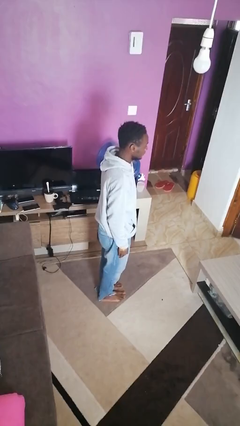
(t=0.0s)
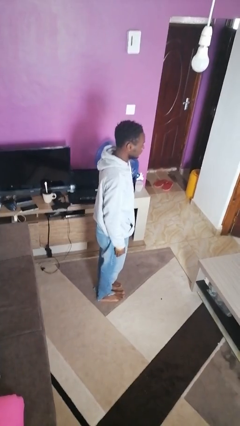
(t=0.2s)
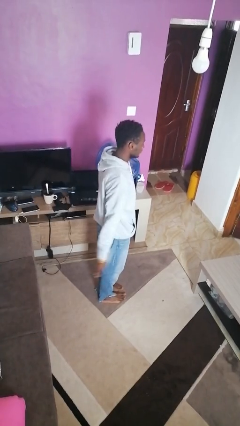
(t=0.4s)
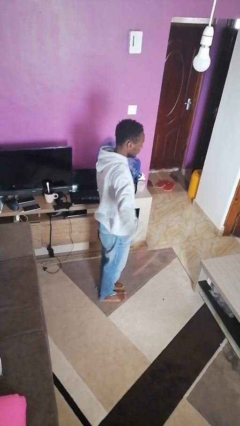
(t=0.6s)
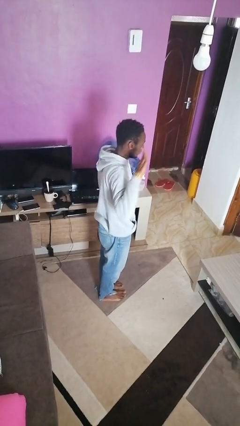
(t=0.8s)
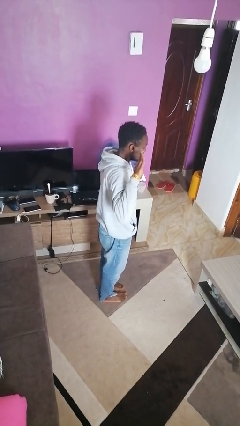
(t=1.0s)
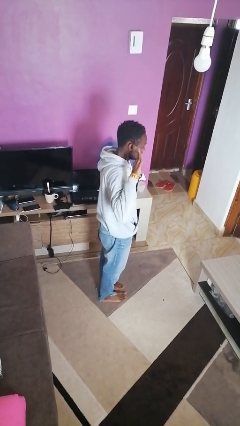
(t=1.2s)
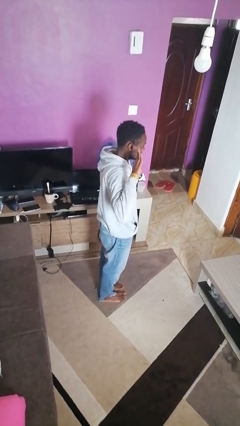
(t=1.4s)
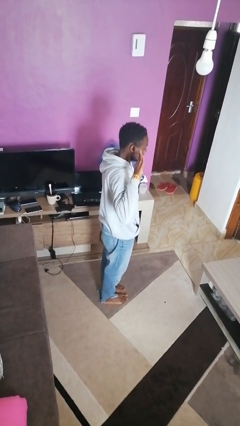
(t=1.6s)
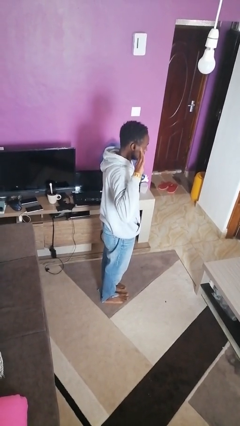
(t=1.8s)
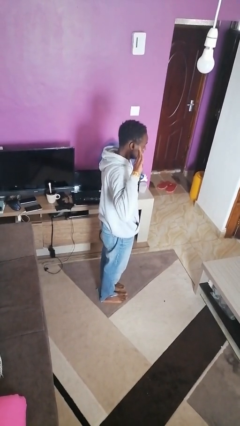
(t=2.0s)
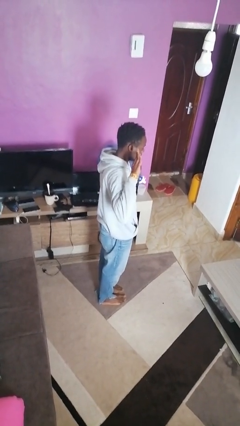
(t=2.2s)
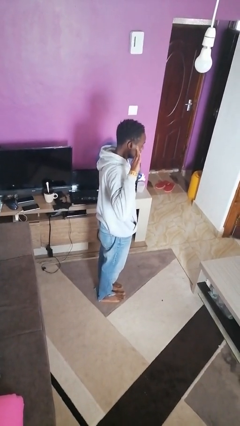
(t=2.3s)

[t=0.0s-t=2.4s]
person salutes

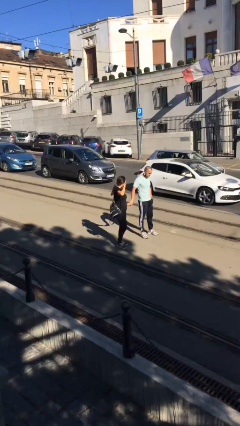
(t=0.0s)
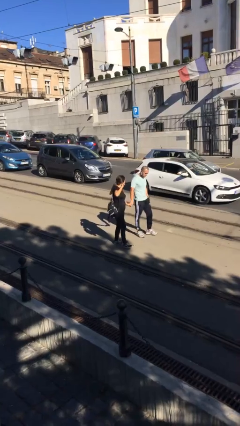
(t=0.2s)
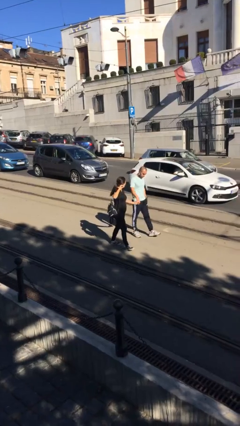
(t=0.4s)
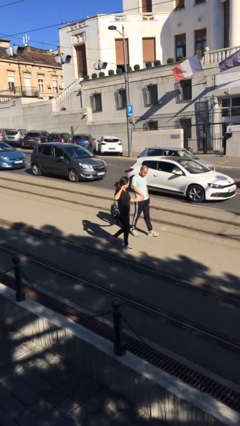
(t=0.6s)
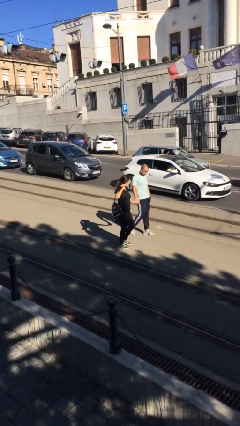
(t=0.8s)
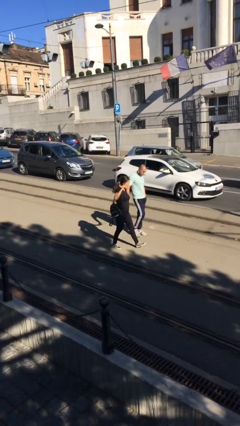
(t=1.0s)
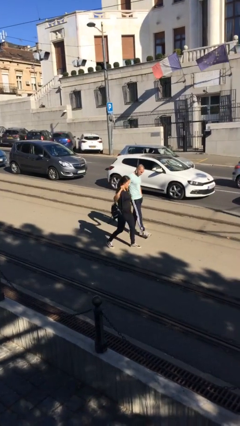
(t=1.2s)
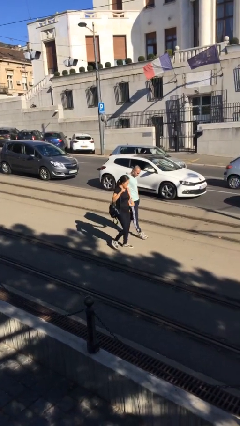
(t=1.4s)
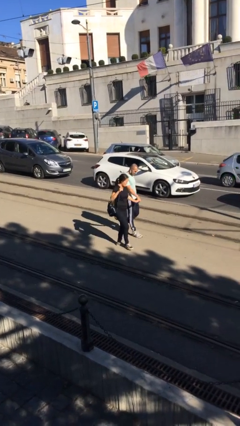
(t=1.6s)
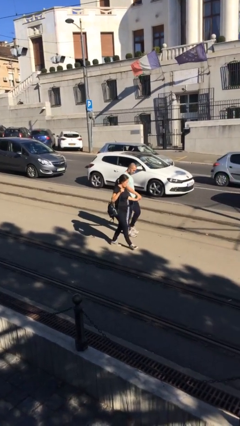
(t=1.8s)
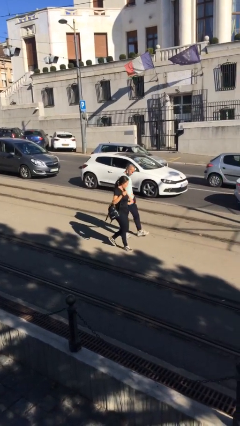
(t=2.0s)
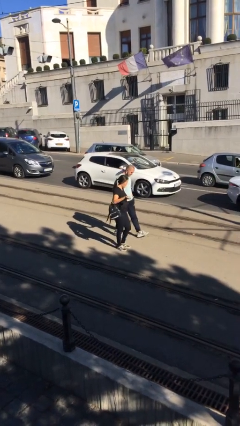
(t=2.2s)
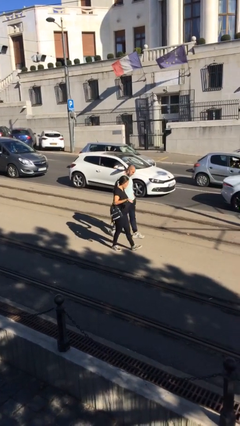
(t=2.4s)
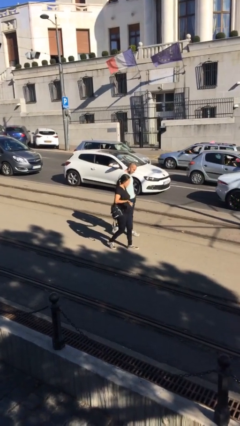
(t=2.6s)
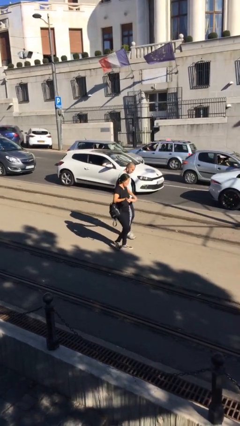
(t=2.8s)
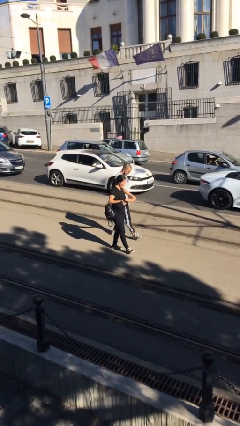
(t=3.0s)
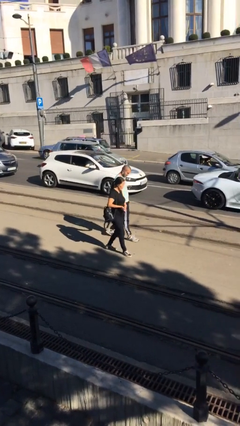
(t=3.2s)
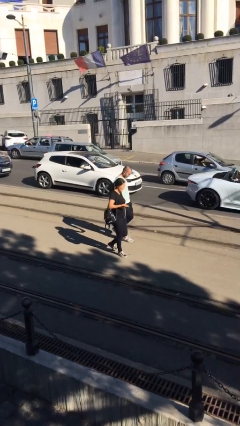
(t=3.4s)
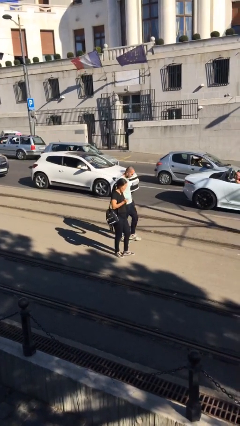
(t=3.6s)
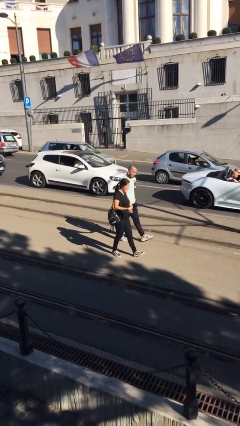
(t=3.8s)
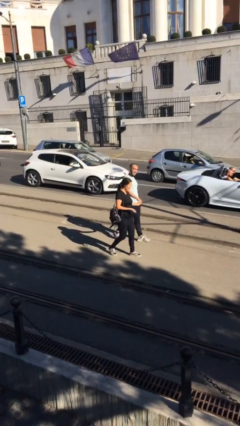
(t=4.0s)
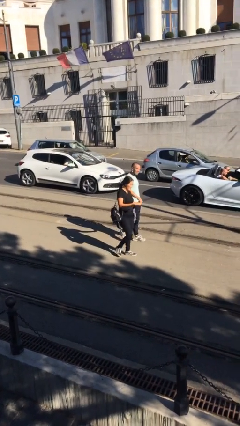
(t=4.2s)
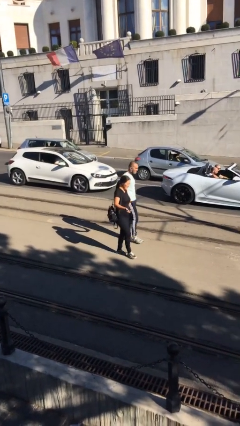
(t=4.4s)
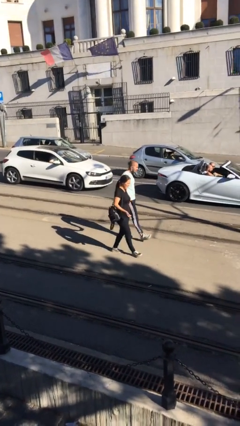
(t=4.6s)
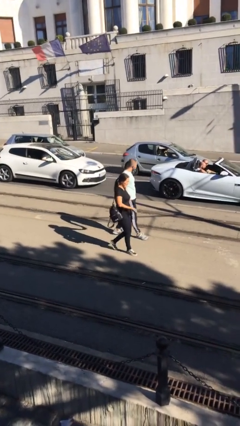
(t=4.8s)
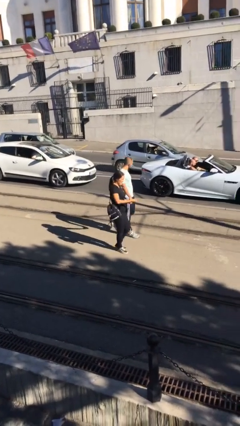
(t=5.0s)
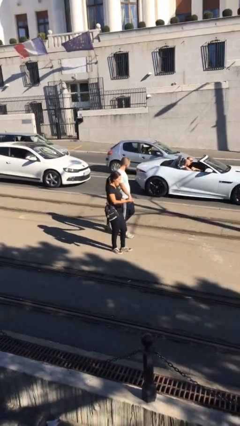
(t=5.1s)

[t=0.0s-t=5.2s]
person holds hand

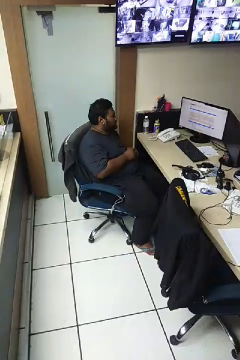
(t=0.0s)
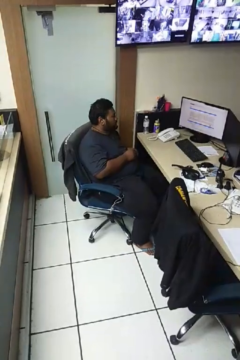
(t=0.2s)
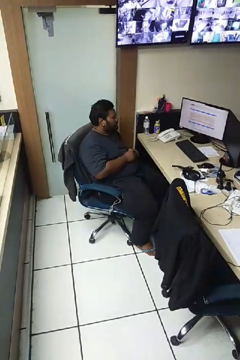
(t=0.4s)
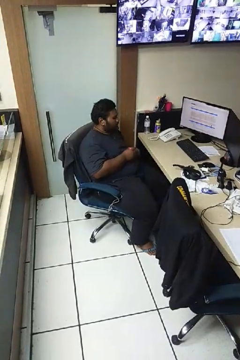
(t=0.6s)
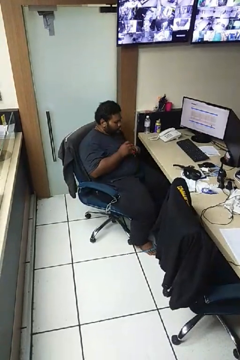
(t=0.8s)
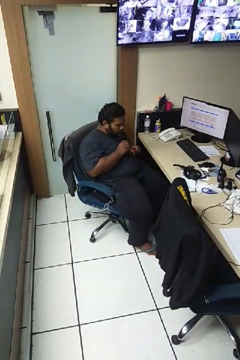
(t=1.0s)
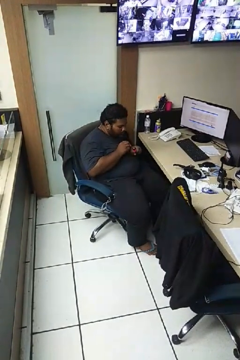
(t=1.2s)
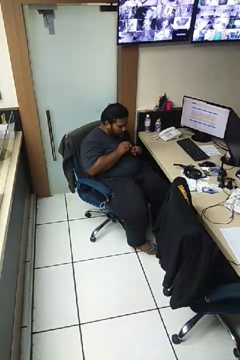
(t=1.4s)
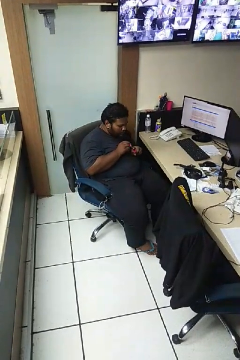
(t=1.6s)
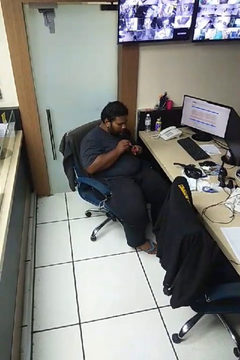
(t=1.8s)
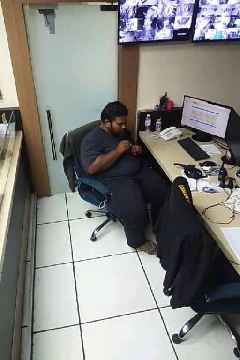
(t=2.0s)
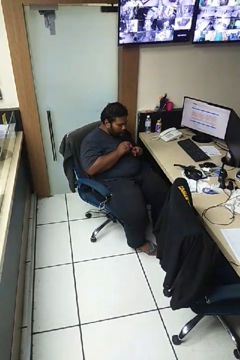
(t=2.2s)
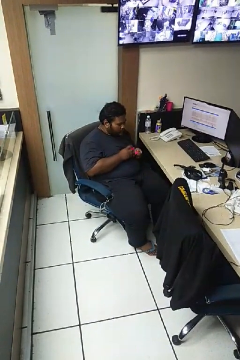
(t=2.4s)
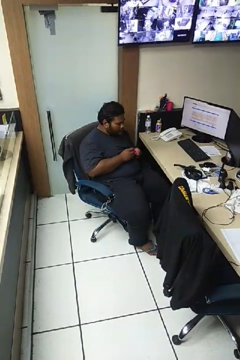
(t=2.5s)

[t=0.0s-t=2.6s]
person paints fingernails

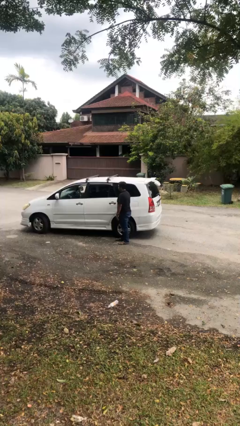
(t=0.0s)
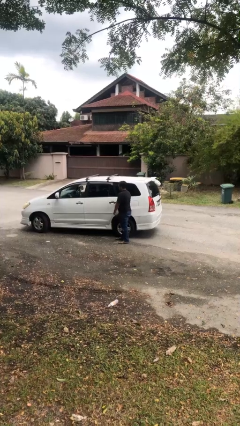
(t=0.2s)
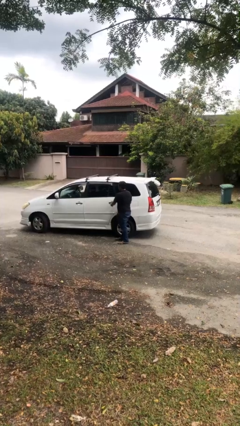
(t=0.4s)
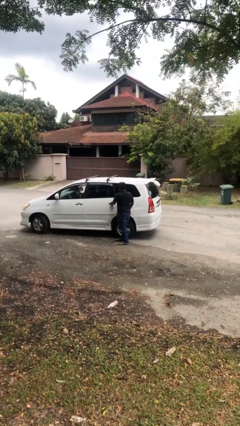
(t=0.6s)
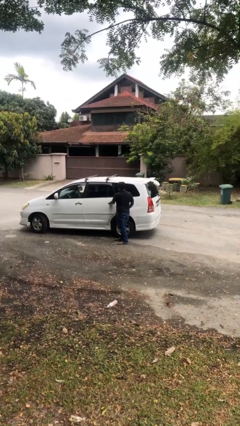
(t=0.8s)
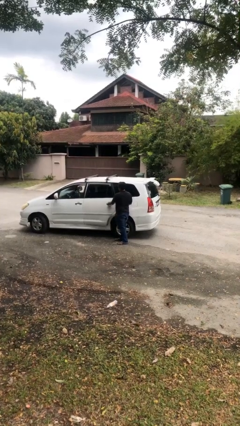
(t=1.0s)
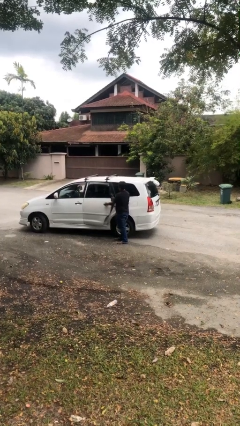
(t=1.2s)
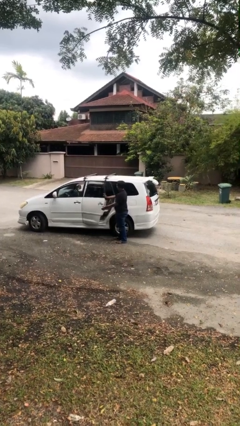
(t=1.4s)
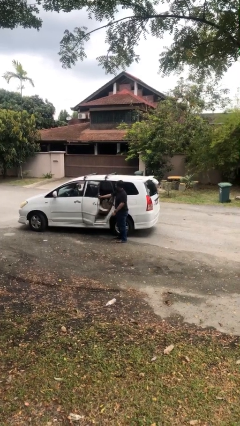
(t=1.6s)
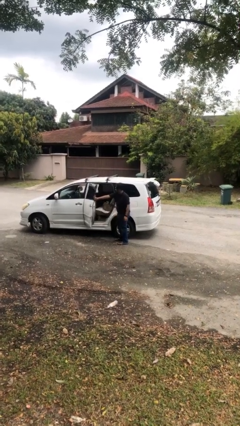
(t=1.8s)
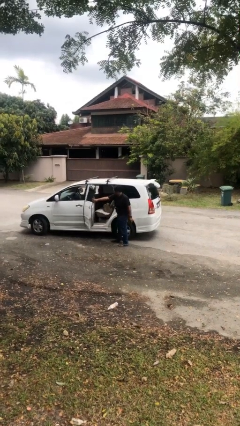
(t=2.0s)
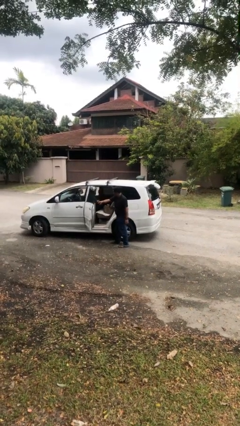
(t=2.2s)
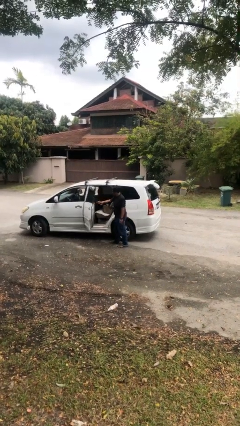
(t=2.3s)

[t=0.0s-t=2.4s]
person opens car door

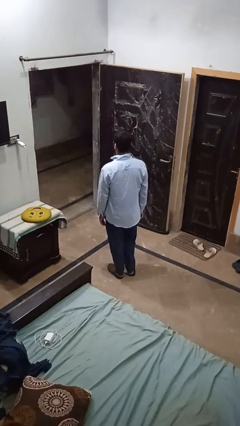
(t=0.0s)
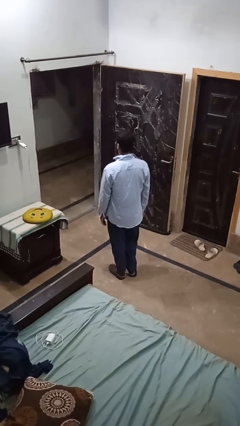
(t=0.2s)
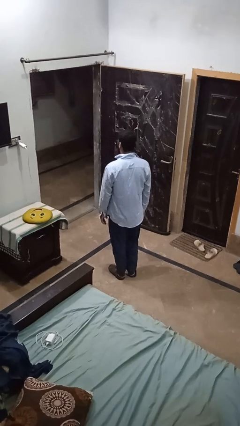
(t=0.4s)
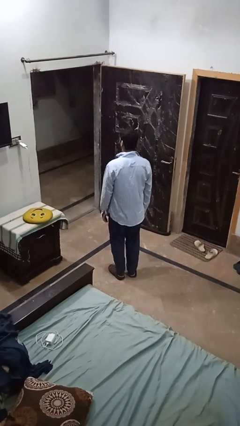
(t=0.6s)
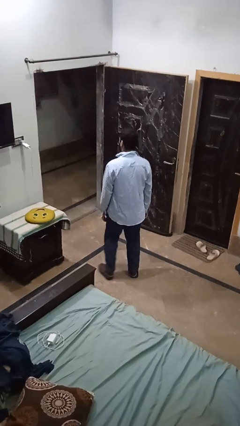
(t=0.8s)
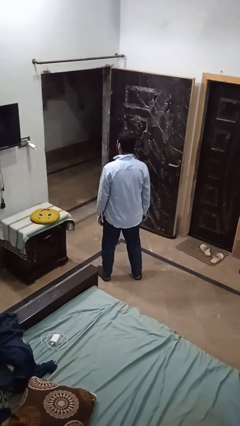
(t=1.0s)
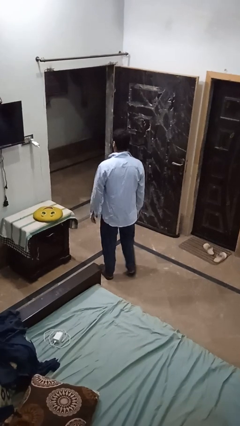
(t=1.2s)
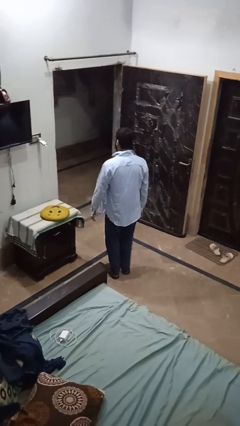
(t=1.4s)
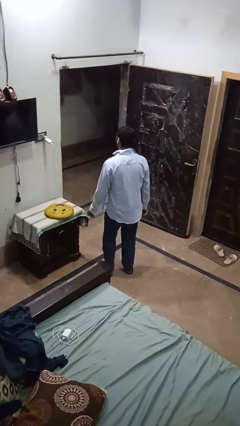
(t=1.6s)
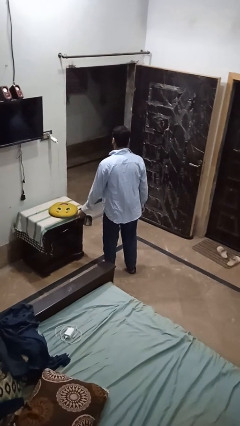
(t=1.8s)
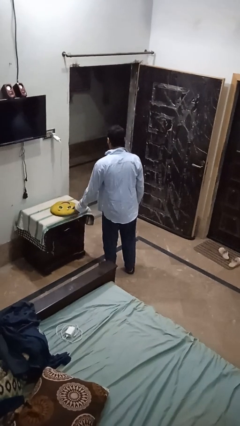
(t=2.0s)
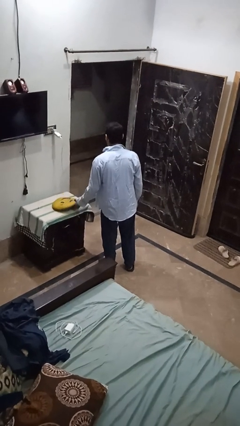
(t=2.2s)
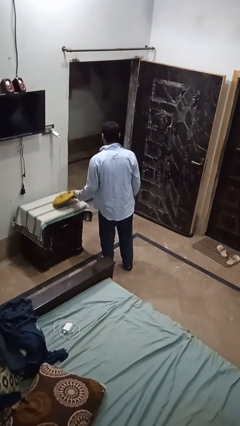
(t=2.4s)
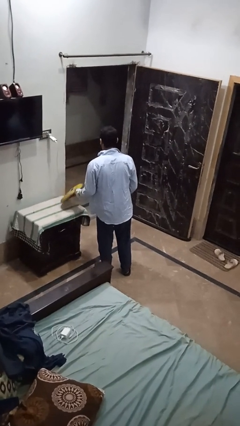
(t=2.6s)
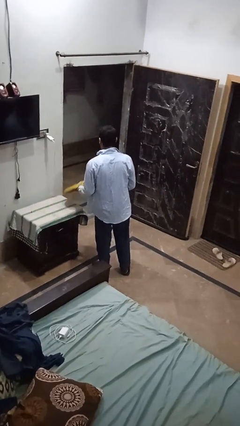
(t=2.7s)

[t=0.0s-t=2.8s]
person picks up object from table

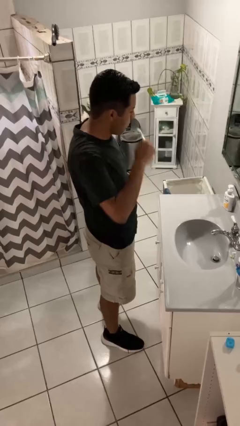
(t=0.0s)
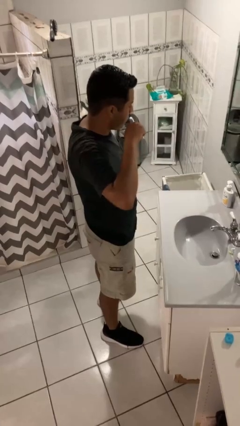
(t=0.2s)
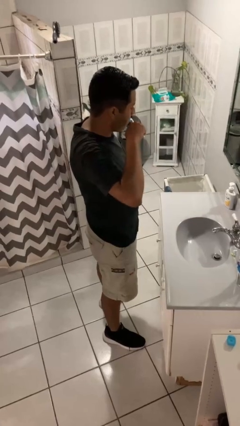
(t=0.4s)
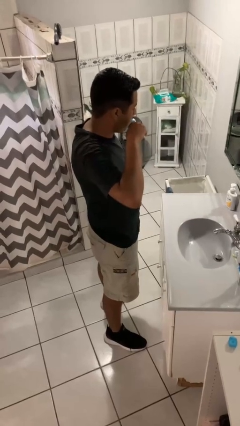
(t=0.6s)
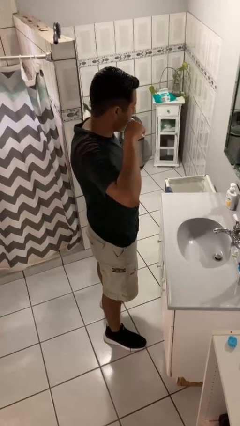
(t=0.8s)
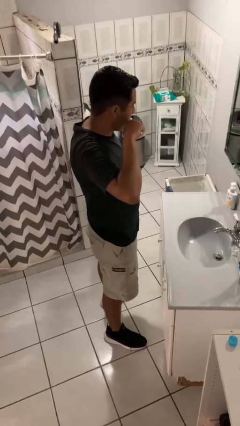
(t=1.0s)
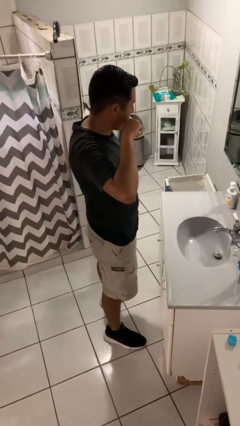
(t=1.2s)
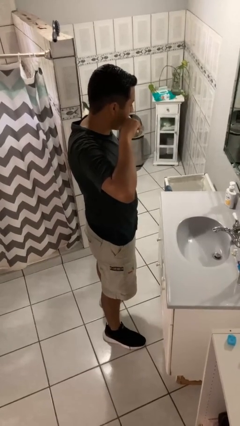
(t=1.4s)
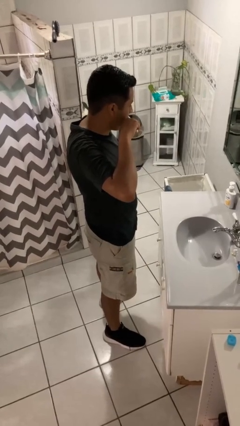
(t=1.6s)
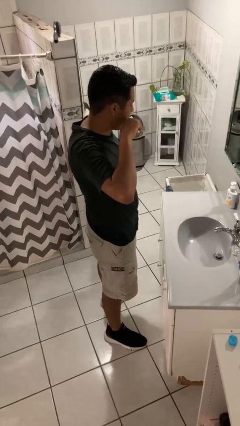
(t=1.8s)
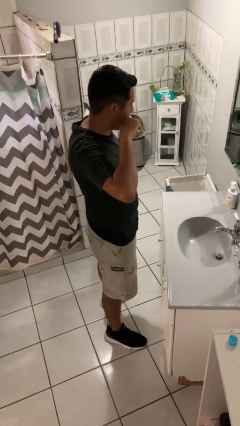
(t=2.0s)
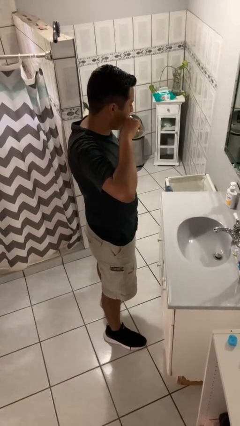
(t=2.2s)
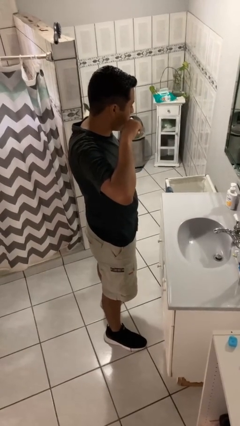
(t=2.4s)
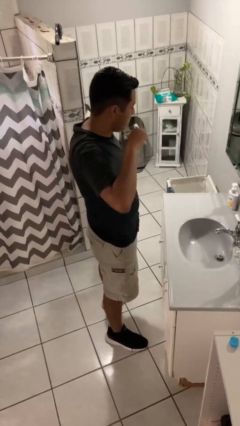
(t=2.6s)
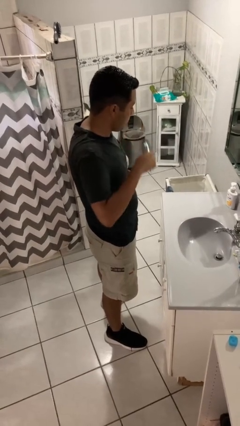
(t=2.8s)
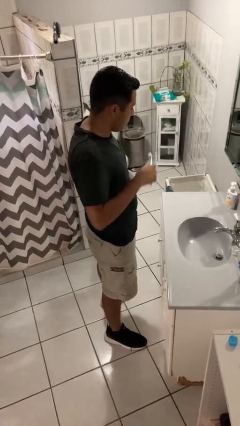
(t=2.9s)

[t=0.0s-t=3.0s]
person brushes teeth
